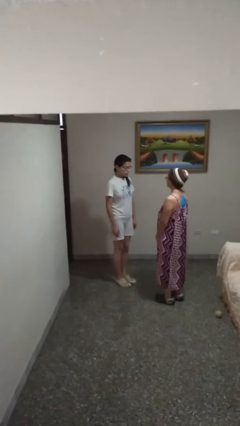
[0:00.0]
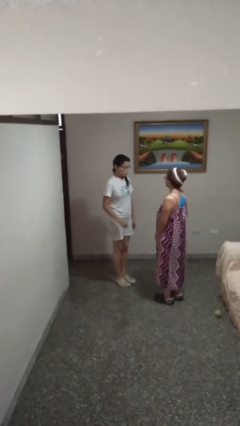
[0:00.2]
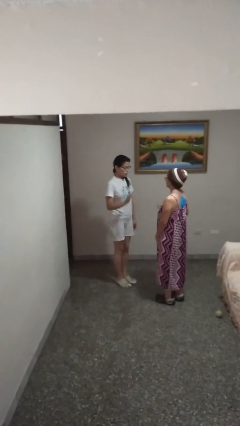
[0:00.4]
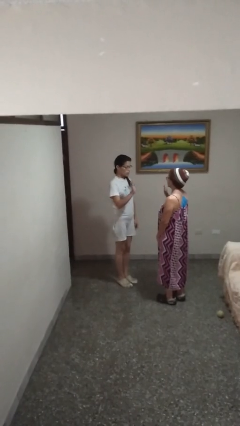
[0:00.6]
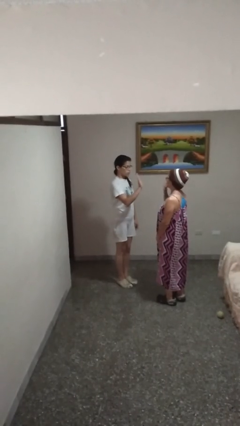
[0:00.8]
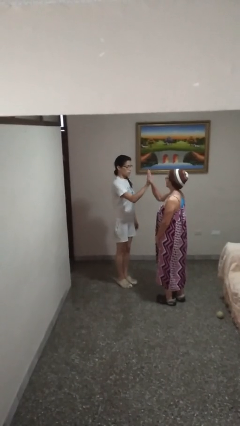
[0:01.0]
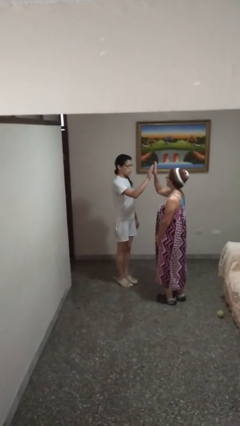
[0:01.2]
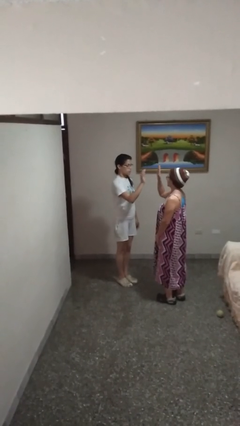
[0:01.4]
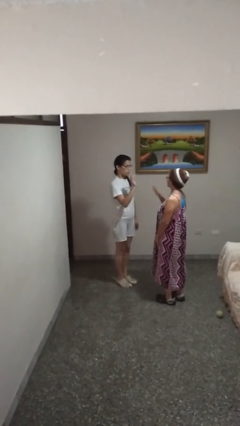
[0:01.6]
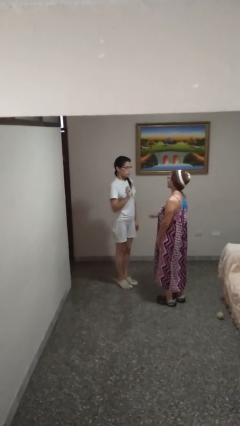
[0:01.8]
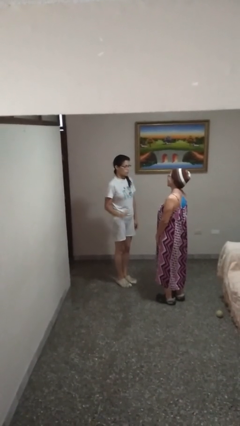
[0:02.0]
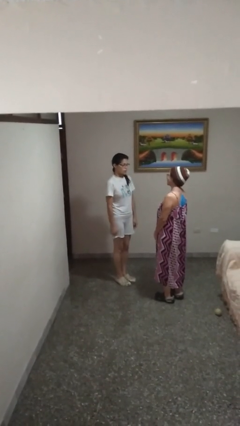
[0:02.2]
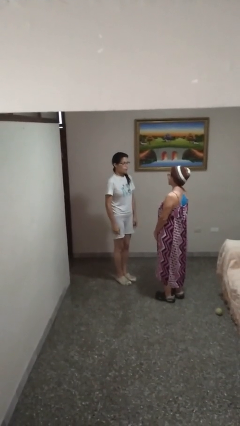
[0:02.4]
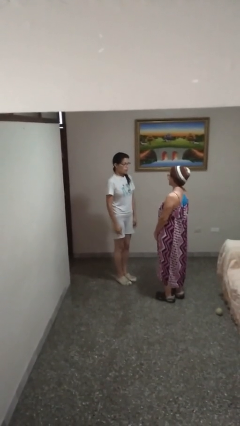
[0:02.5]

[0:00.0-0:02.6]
person highfives hand

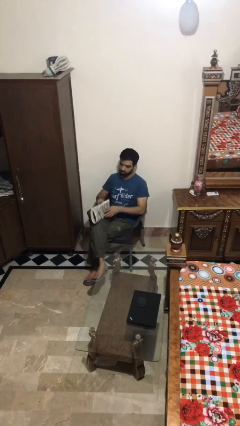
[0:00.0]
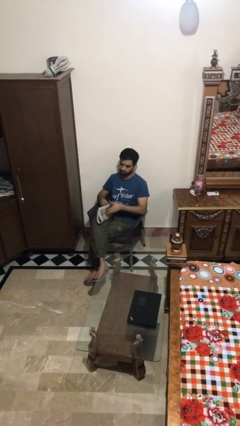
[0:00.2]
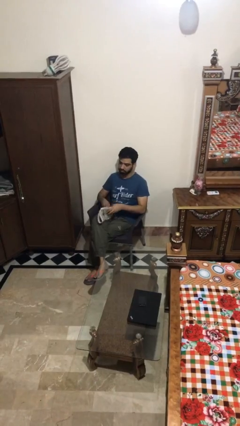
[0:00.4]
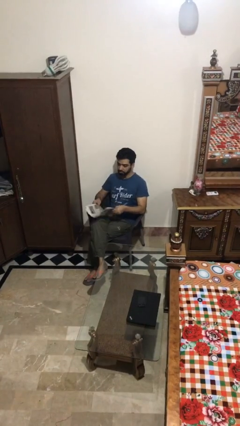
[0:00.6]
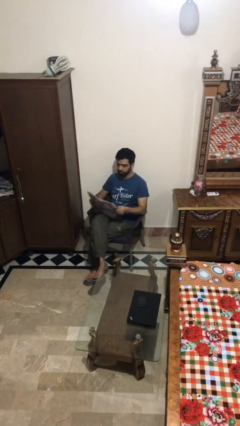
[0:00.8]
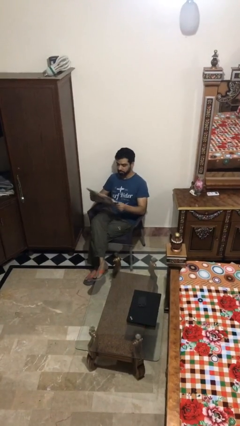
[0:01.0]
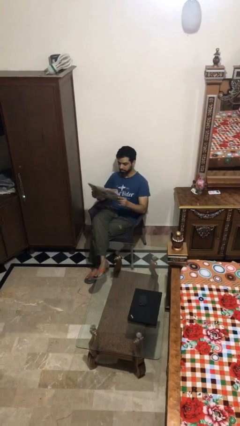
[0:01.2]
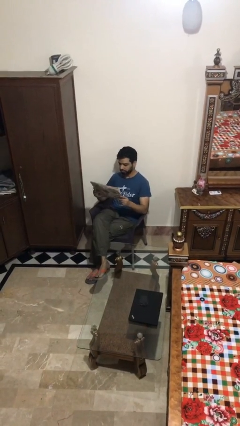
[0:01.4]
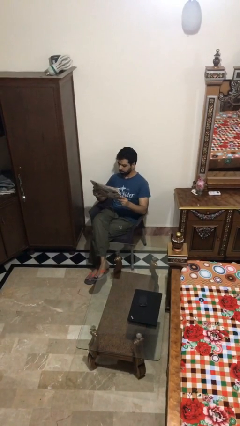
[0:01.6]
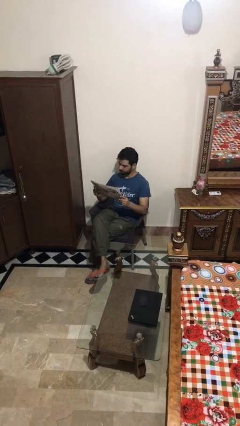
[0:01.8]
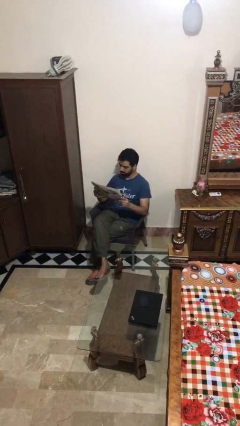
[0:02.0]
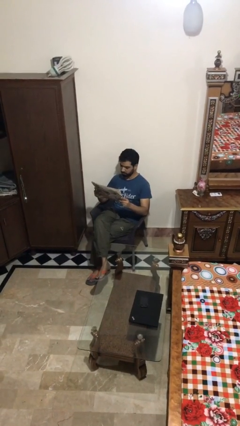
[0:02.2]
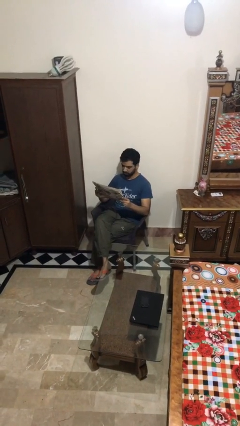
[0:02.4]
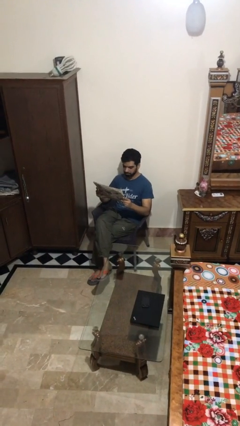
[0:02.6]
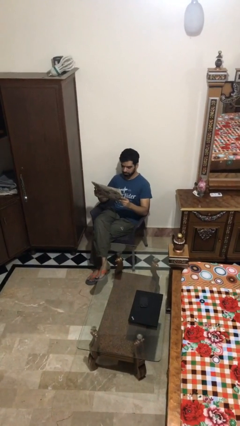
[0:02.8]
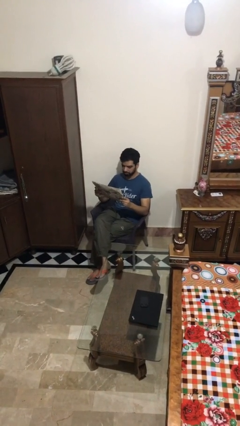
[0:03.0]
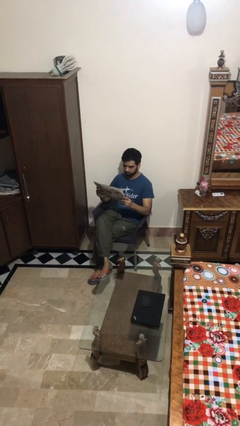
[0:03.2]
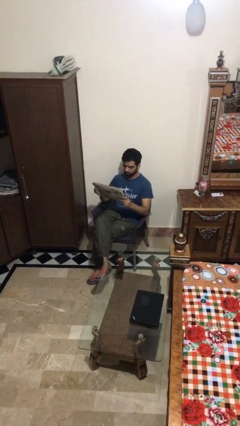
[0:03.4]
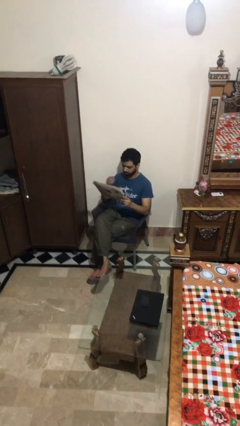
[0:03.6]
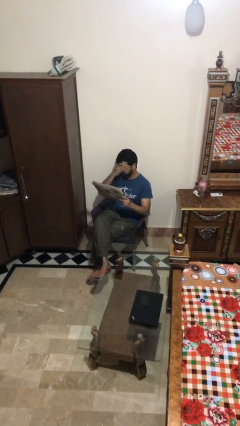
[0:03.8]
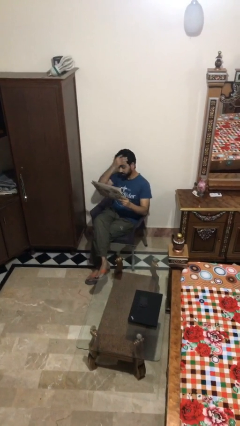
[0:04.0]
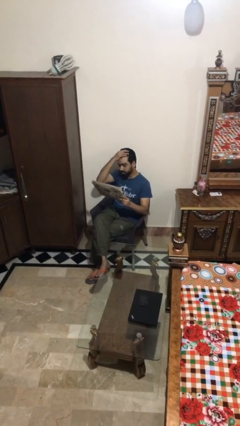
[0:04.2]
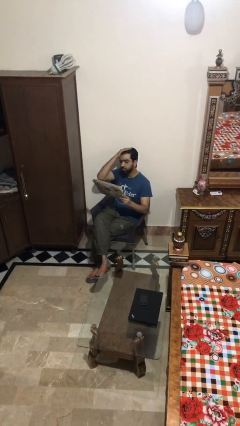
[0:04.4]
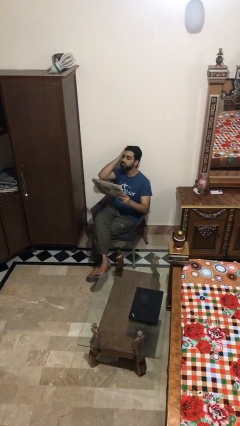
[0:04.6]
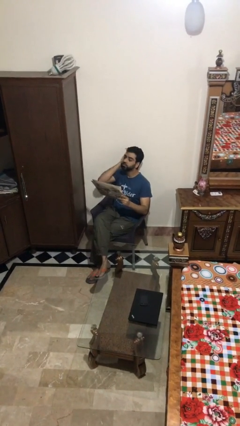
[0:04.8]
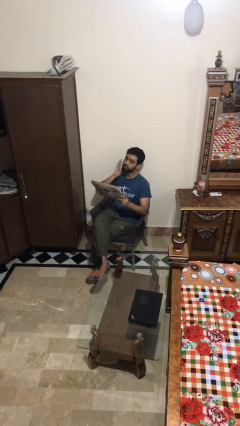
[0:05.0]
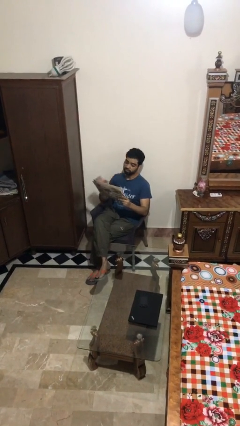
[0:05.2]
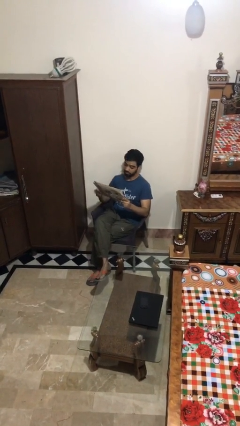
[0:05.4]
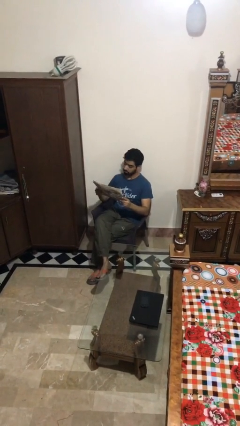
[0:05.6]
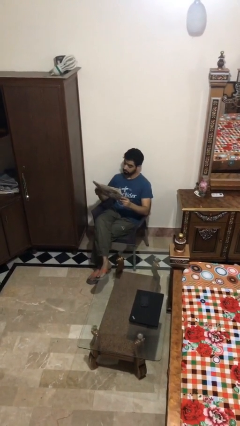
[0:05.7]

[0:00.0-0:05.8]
person reads document

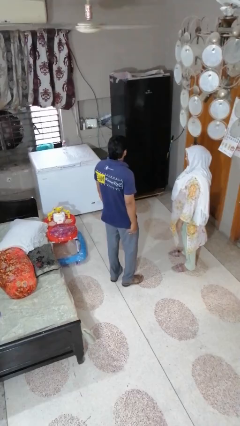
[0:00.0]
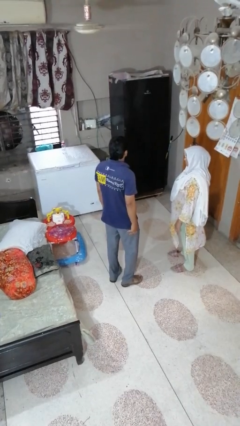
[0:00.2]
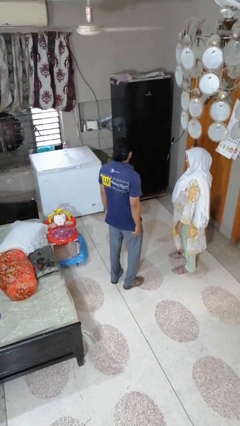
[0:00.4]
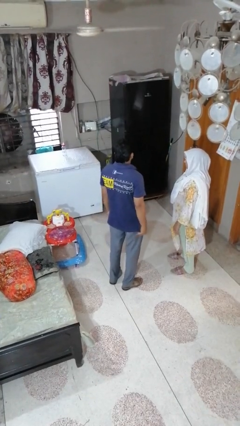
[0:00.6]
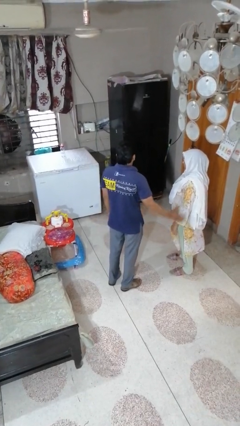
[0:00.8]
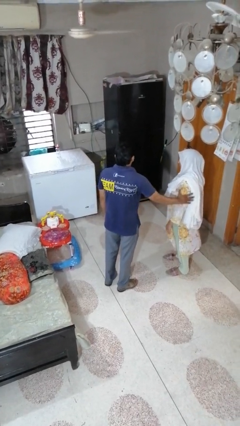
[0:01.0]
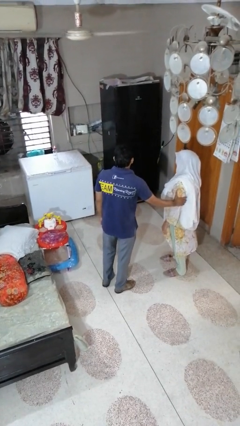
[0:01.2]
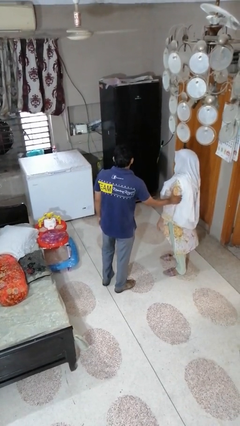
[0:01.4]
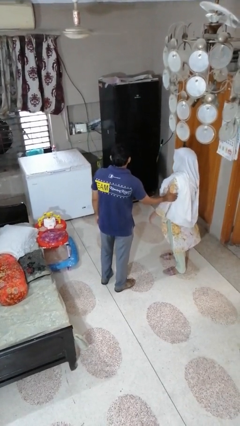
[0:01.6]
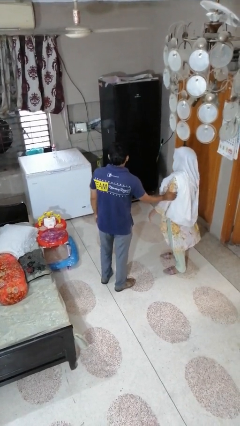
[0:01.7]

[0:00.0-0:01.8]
person grabs person by bicep

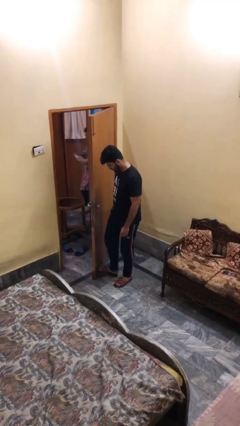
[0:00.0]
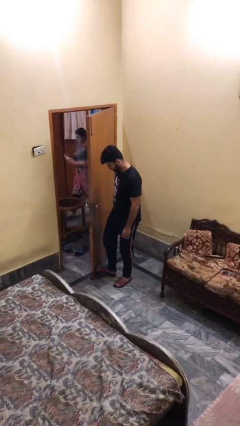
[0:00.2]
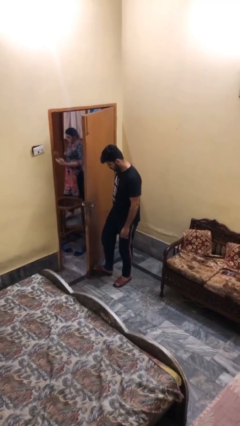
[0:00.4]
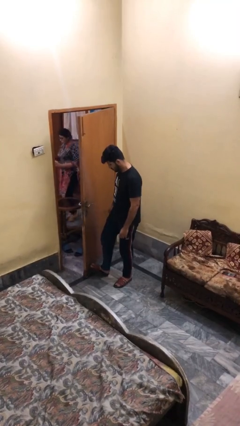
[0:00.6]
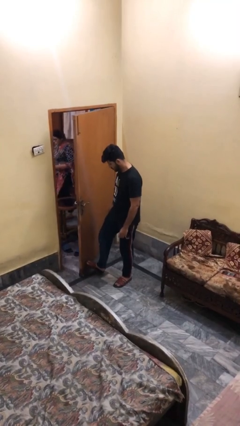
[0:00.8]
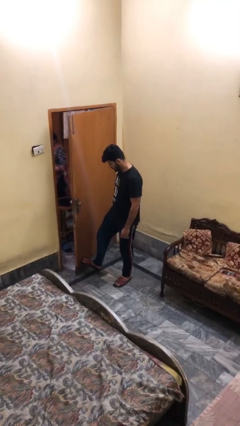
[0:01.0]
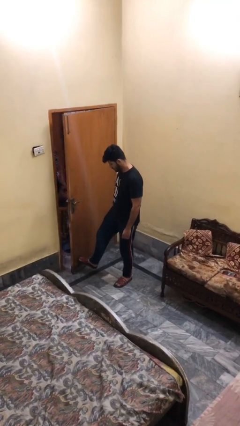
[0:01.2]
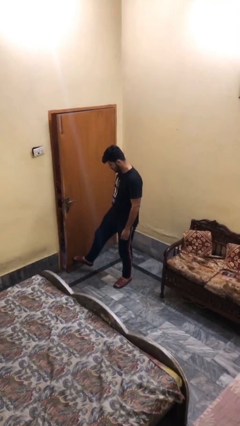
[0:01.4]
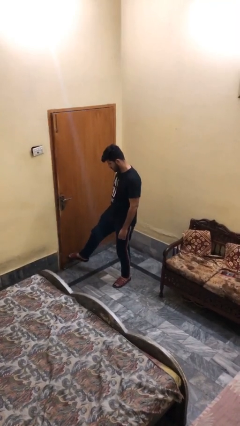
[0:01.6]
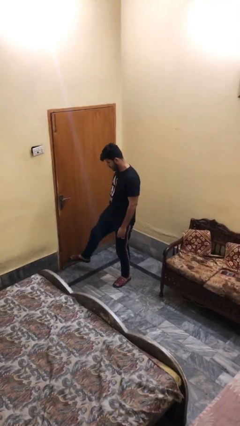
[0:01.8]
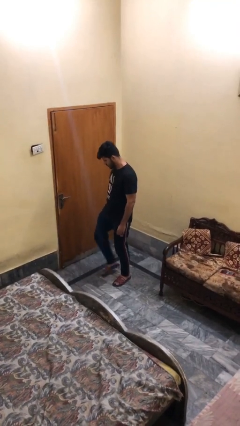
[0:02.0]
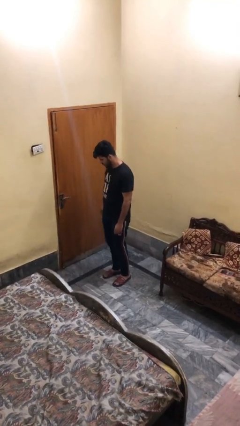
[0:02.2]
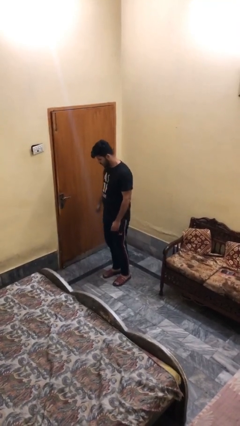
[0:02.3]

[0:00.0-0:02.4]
person closes door with foot

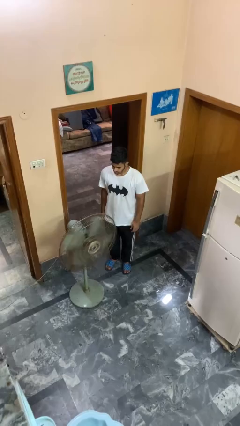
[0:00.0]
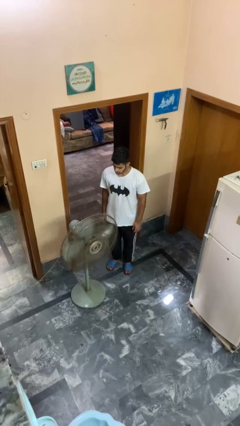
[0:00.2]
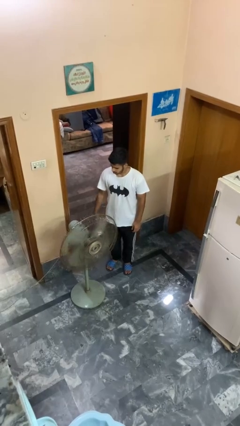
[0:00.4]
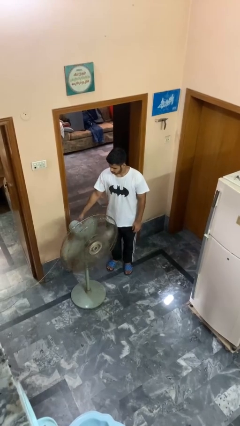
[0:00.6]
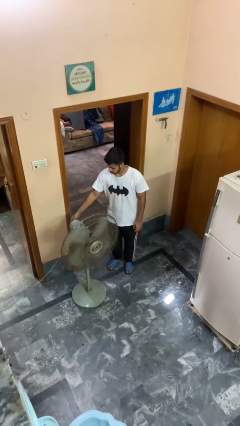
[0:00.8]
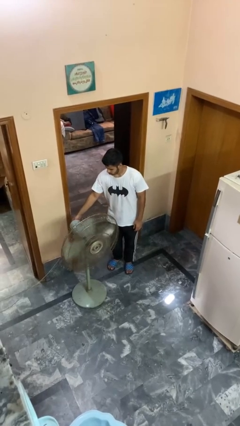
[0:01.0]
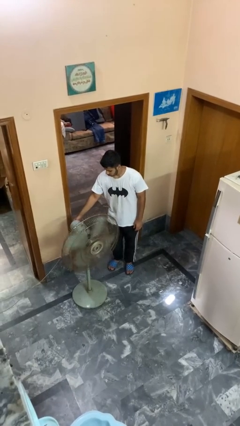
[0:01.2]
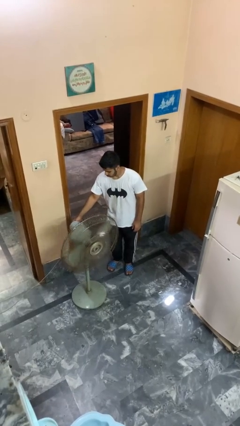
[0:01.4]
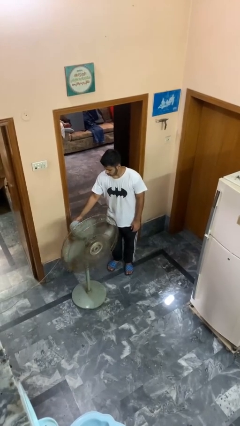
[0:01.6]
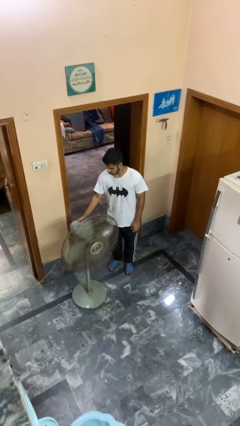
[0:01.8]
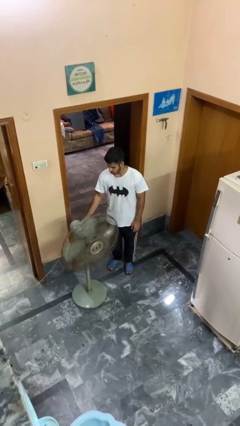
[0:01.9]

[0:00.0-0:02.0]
person turns off fan

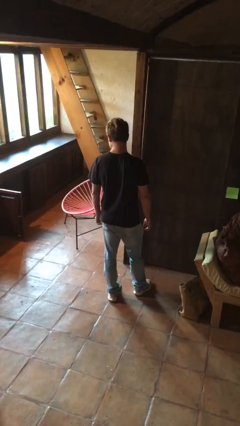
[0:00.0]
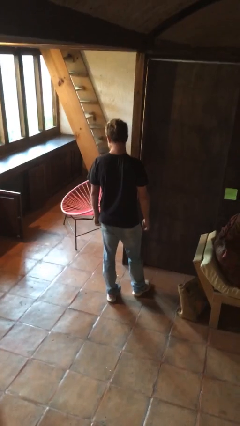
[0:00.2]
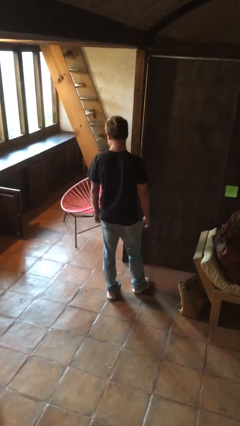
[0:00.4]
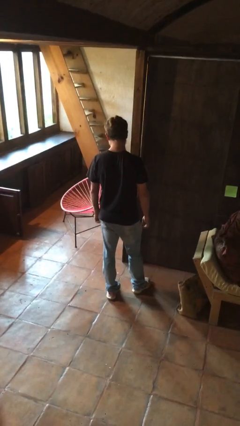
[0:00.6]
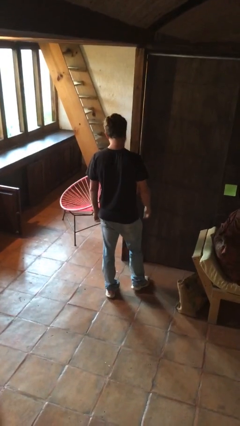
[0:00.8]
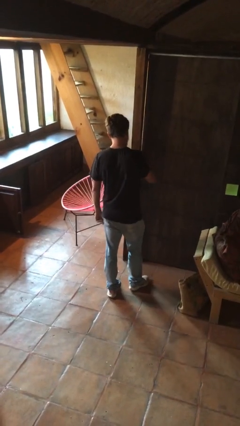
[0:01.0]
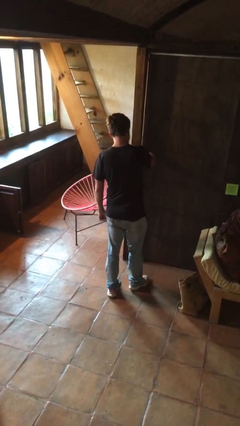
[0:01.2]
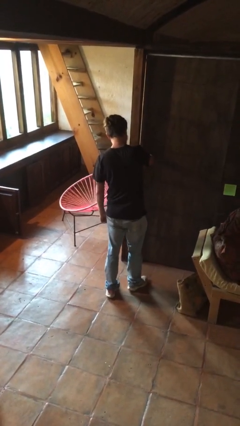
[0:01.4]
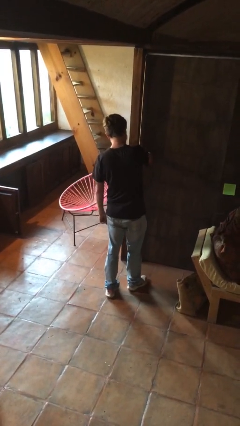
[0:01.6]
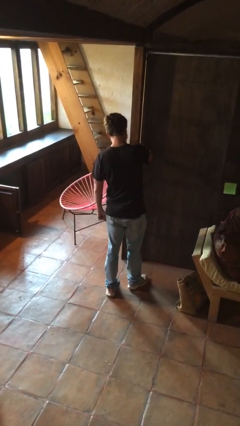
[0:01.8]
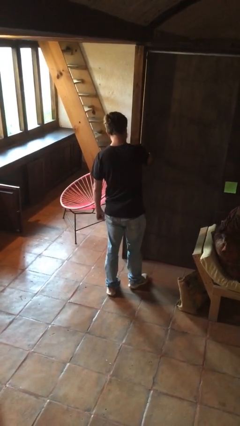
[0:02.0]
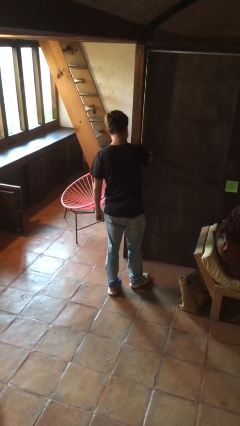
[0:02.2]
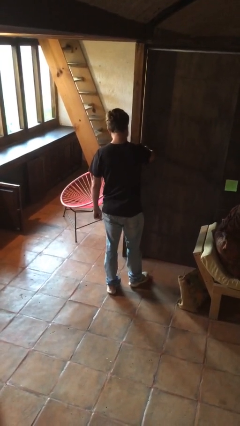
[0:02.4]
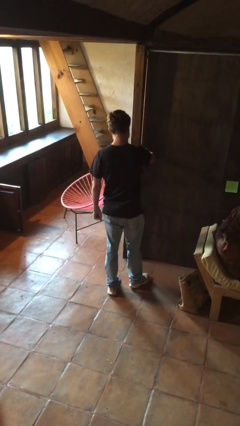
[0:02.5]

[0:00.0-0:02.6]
person unlocks door with keys

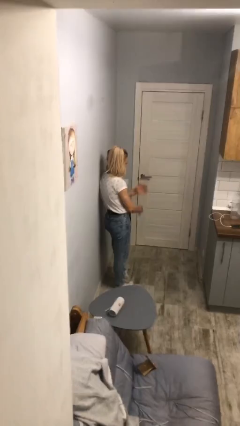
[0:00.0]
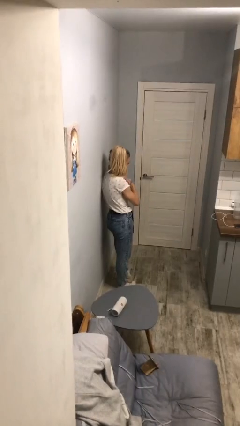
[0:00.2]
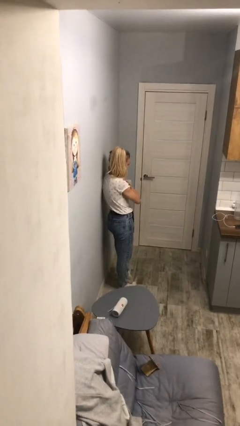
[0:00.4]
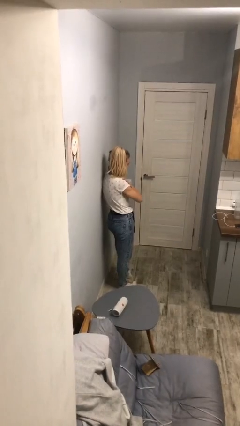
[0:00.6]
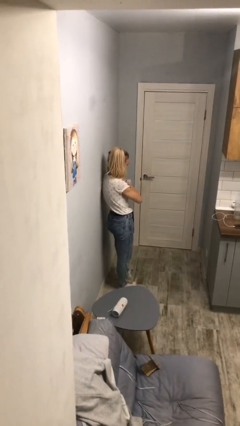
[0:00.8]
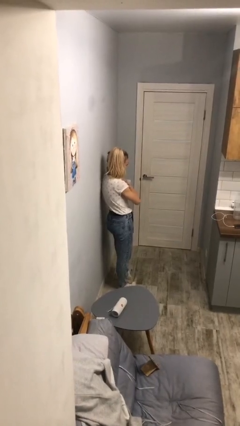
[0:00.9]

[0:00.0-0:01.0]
person crosses arms
